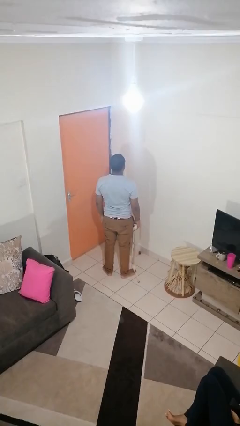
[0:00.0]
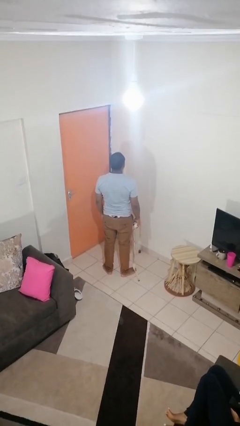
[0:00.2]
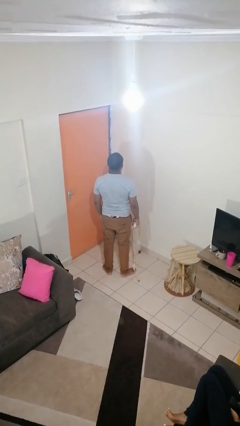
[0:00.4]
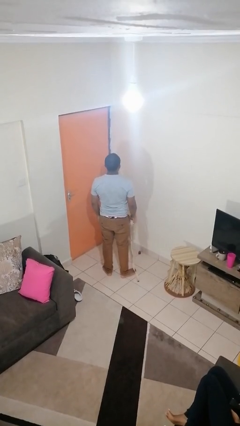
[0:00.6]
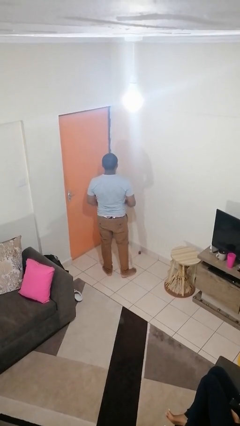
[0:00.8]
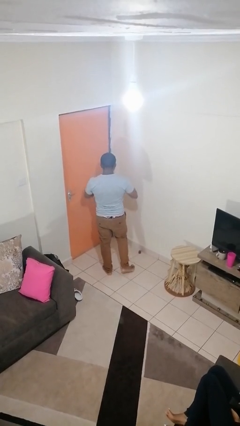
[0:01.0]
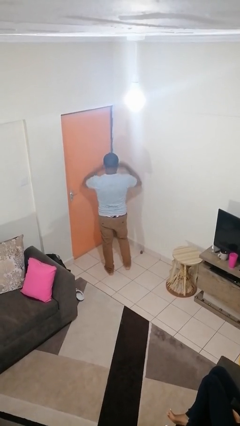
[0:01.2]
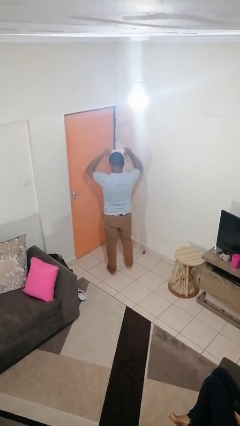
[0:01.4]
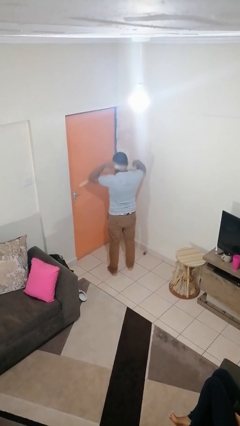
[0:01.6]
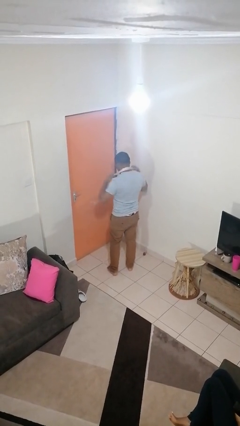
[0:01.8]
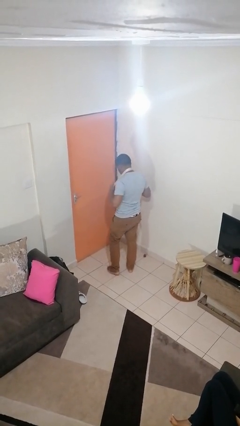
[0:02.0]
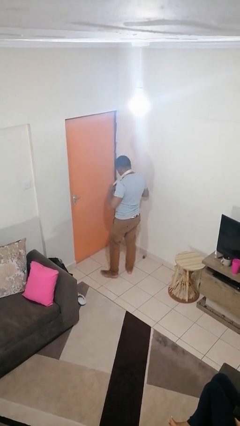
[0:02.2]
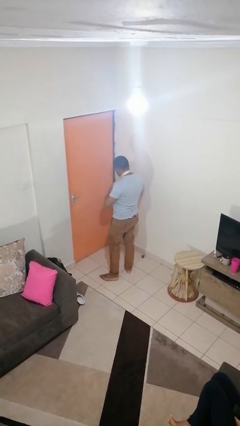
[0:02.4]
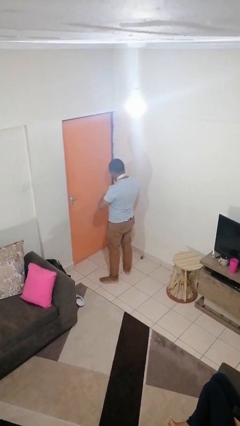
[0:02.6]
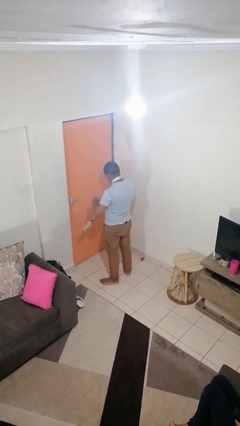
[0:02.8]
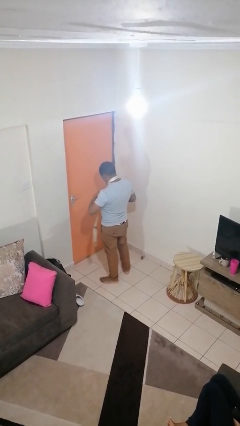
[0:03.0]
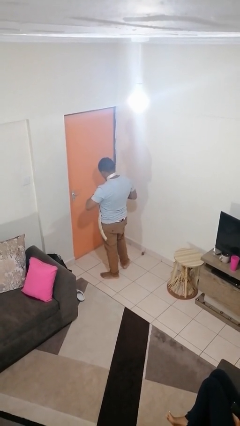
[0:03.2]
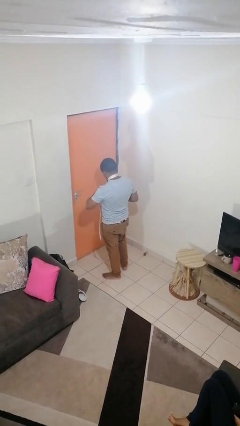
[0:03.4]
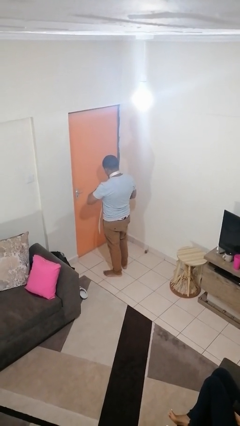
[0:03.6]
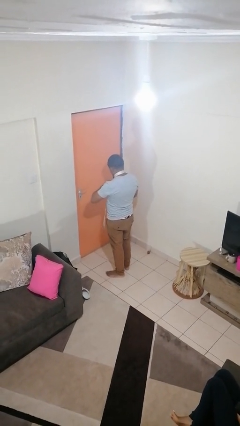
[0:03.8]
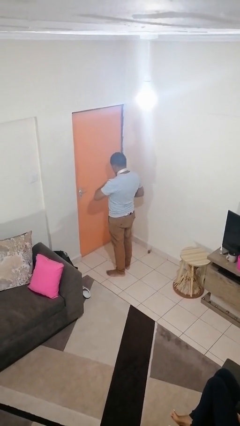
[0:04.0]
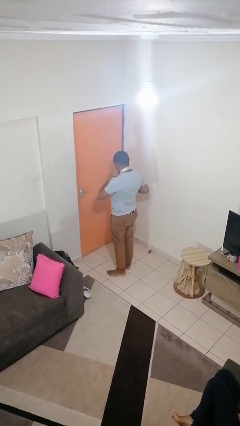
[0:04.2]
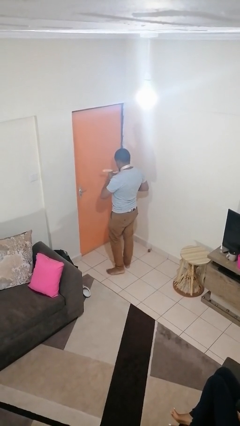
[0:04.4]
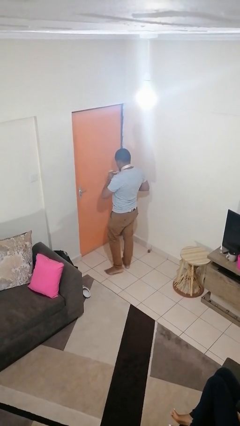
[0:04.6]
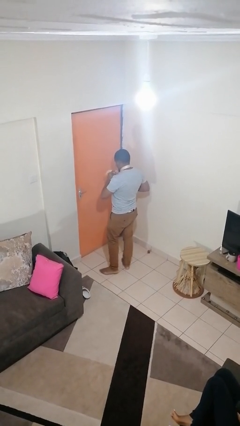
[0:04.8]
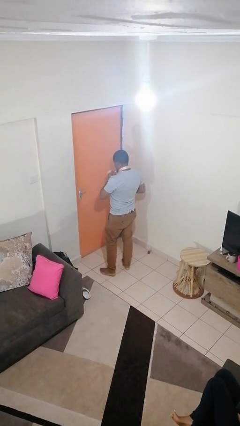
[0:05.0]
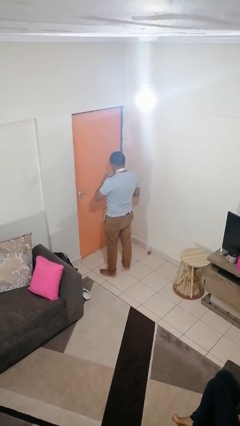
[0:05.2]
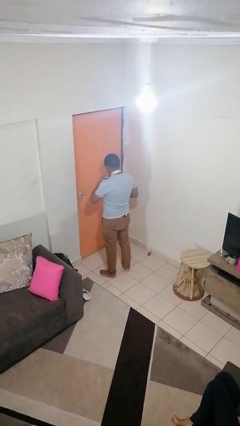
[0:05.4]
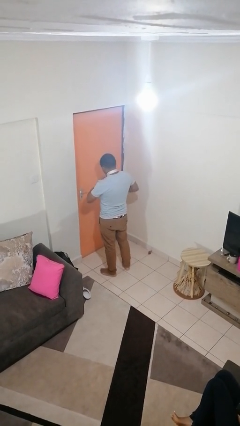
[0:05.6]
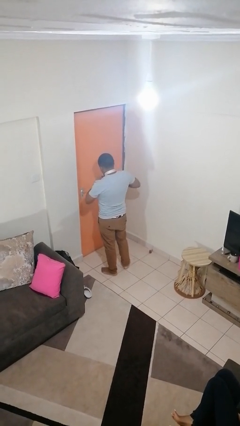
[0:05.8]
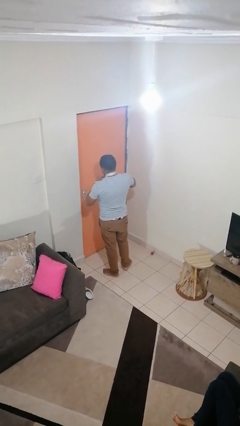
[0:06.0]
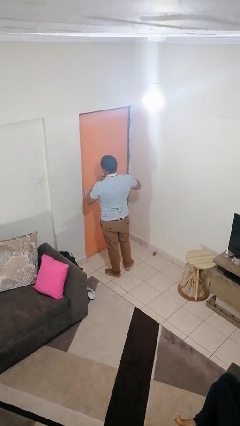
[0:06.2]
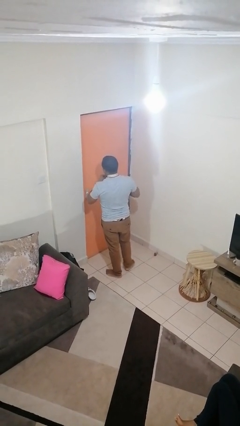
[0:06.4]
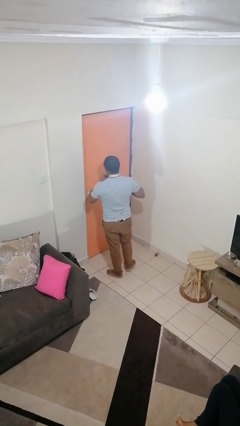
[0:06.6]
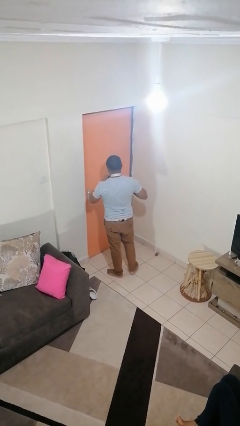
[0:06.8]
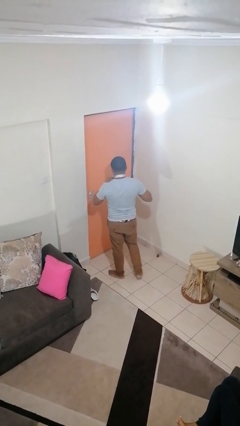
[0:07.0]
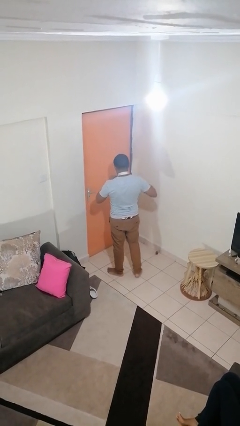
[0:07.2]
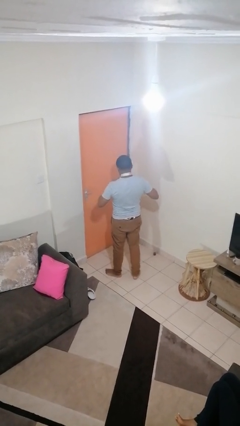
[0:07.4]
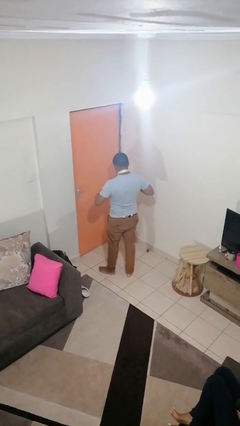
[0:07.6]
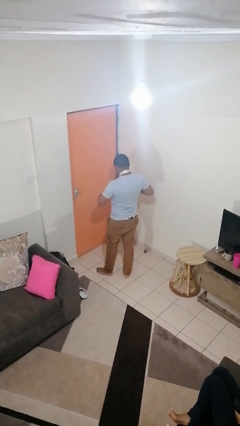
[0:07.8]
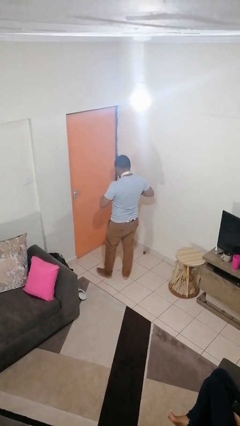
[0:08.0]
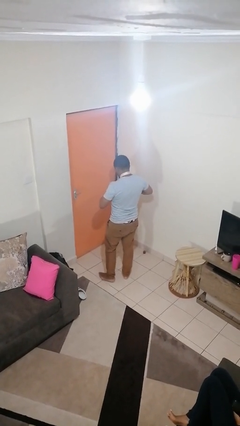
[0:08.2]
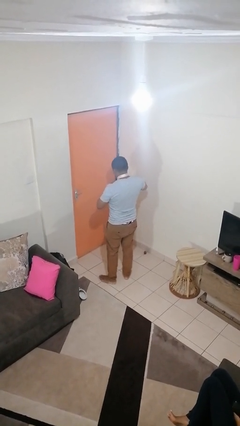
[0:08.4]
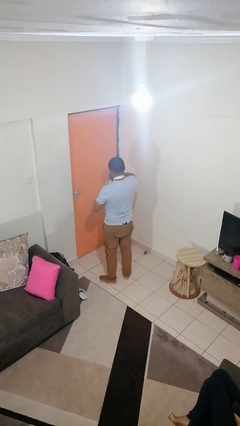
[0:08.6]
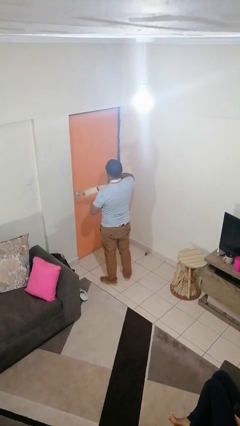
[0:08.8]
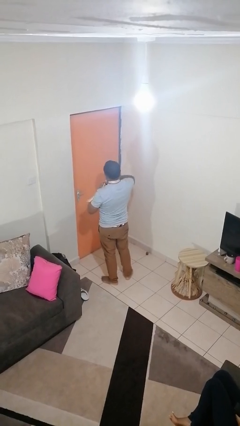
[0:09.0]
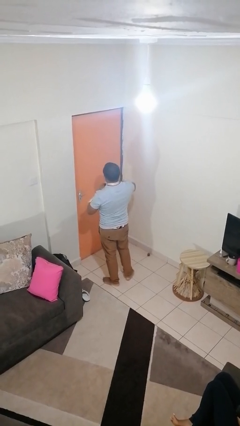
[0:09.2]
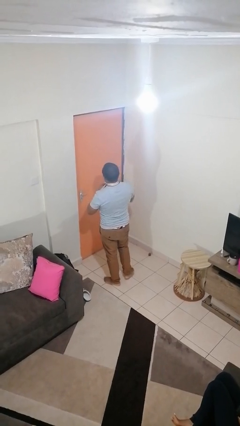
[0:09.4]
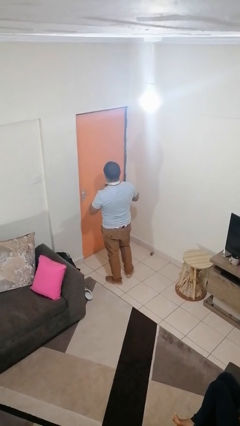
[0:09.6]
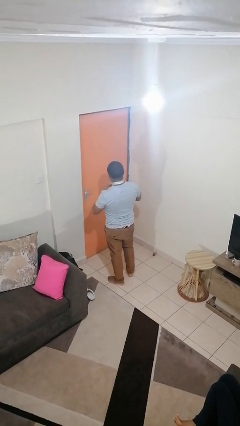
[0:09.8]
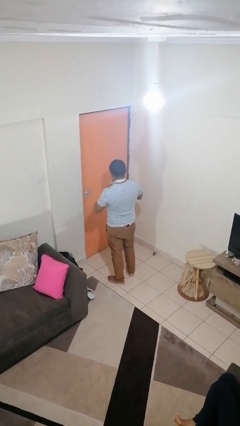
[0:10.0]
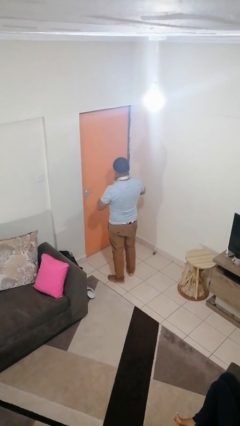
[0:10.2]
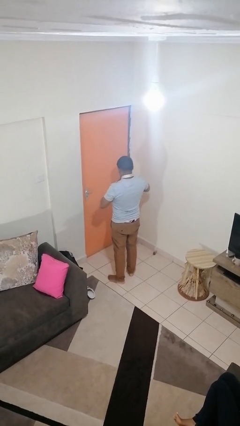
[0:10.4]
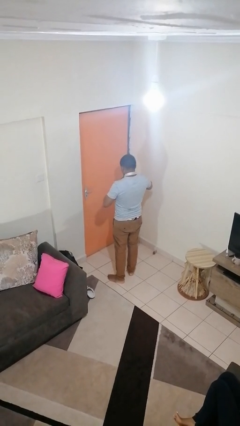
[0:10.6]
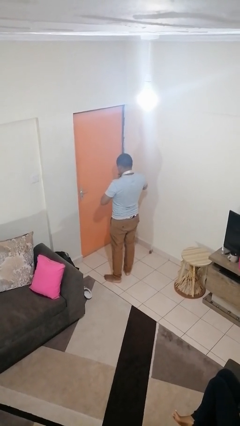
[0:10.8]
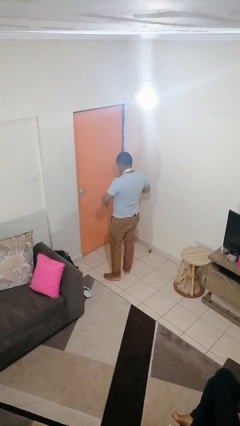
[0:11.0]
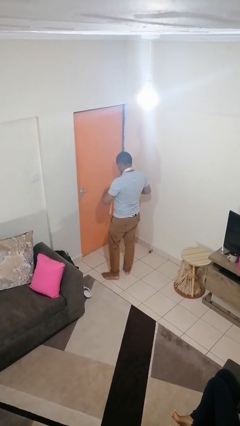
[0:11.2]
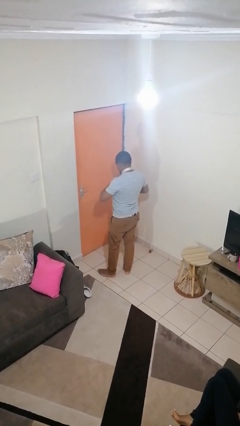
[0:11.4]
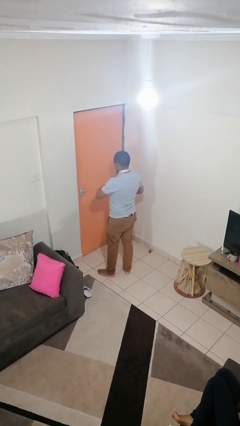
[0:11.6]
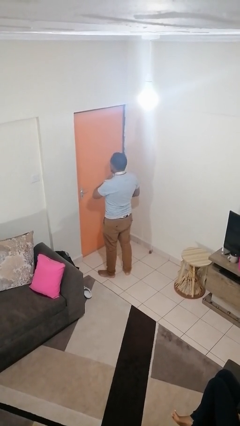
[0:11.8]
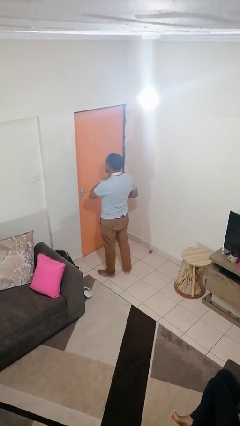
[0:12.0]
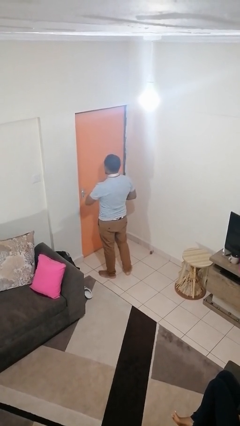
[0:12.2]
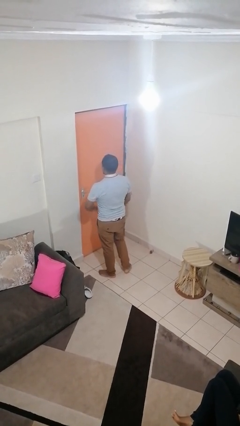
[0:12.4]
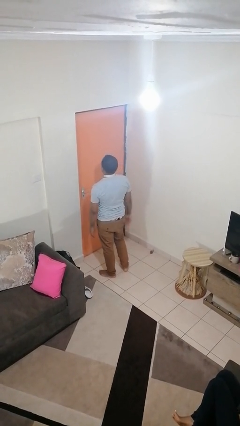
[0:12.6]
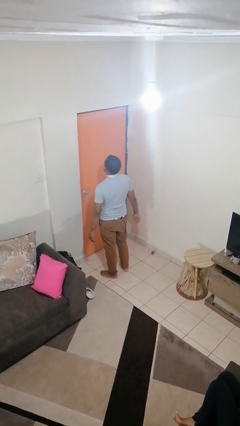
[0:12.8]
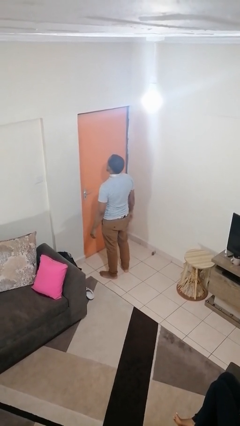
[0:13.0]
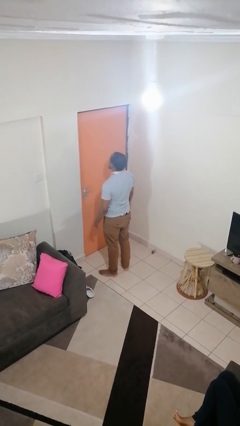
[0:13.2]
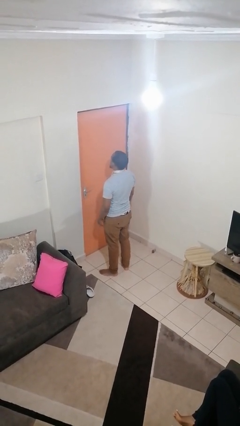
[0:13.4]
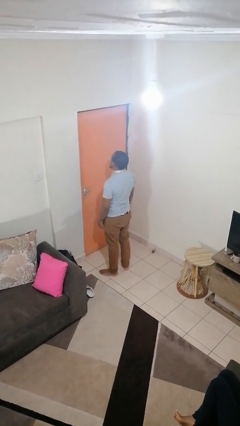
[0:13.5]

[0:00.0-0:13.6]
person puts on necktie

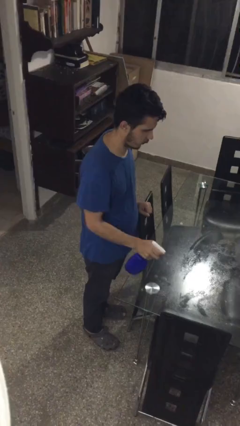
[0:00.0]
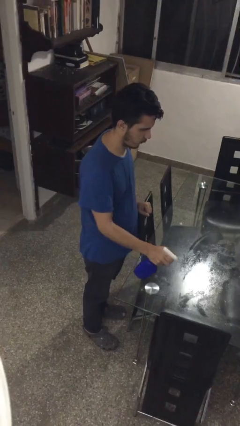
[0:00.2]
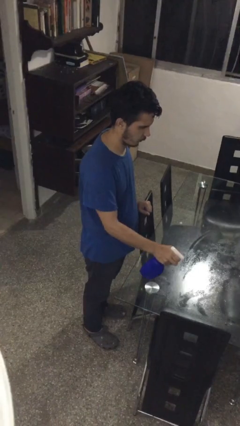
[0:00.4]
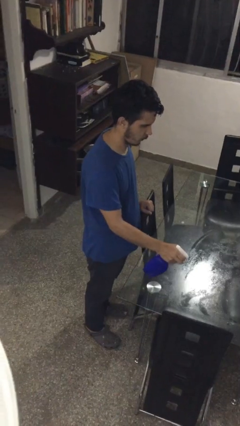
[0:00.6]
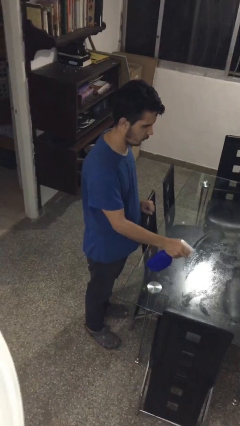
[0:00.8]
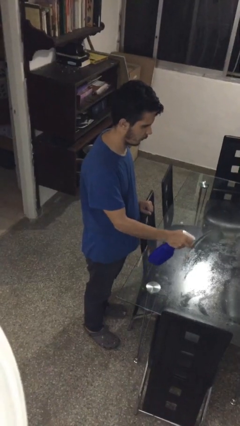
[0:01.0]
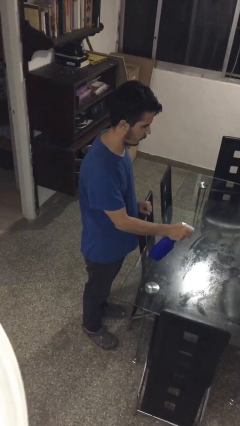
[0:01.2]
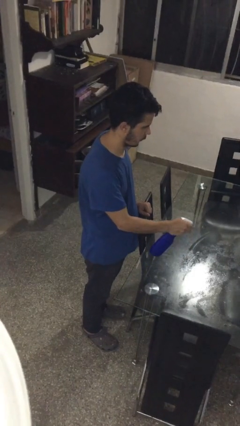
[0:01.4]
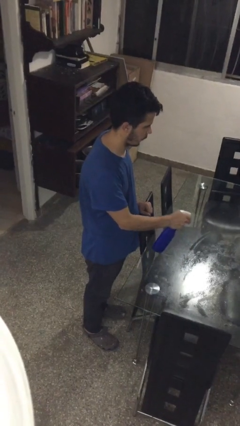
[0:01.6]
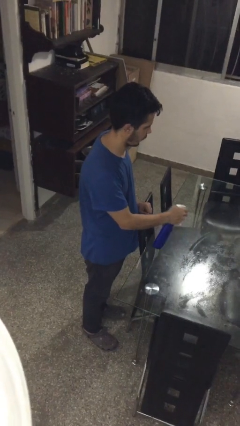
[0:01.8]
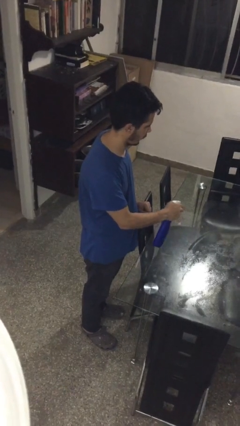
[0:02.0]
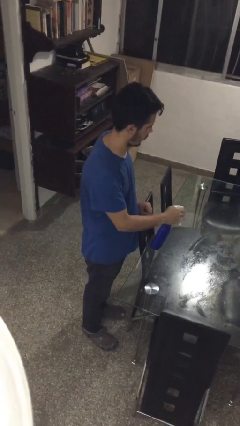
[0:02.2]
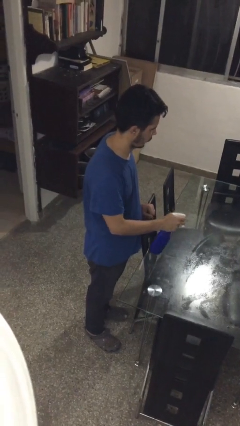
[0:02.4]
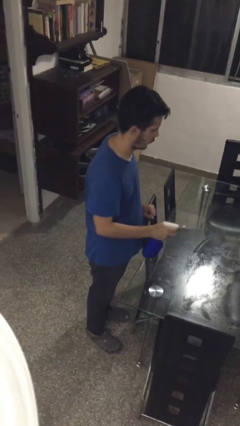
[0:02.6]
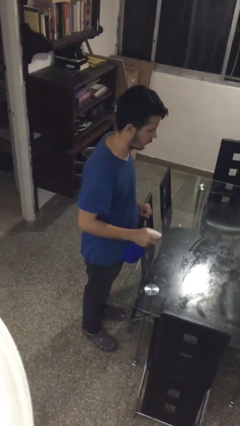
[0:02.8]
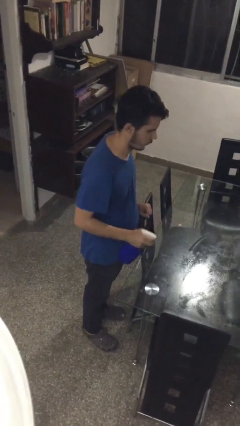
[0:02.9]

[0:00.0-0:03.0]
person sprays from bottle

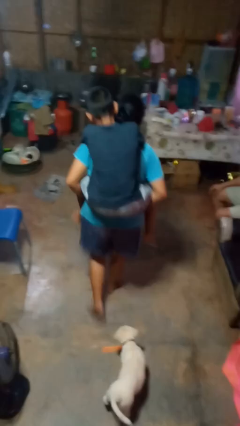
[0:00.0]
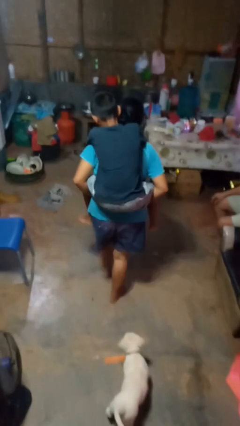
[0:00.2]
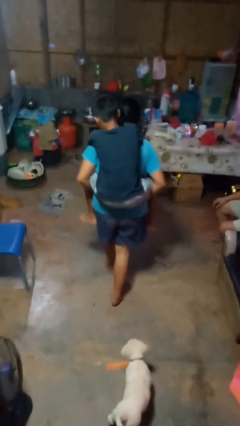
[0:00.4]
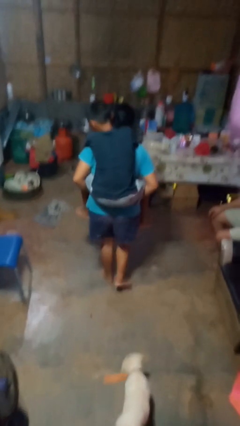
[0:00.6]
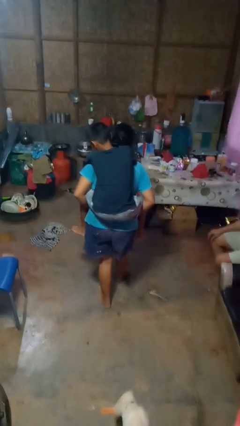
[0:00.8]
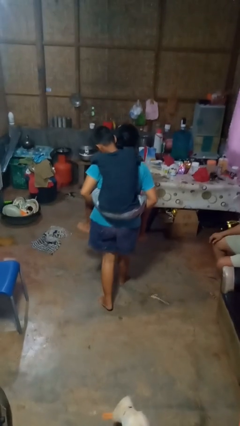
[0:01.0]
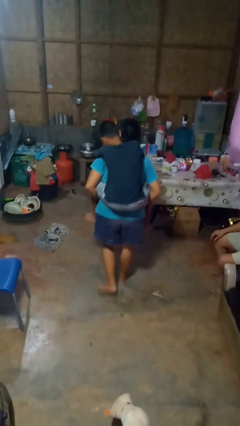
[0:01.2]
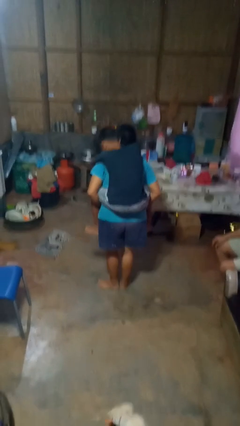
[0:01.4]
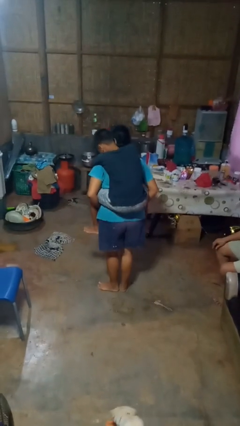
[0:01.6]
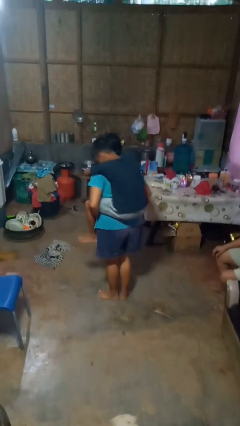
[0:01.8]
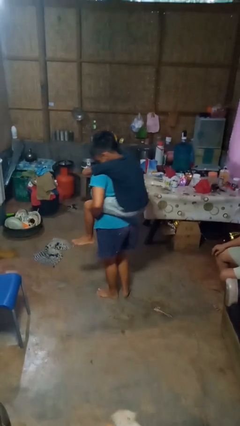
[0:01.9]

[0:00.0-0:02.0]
person carries person on back
